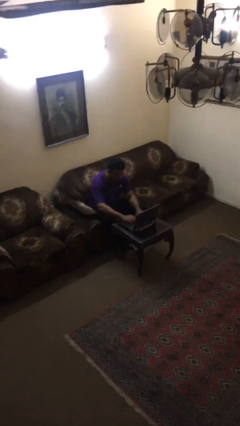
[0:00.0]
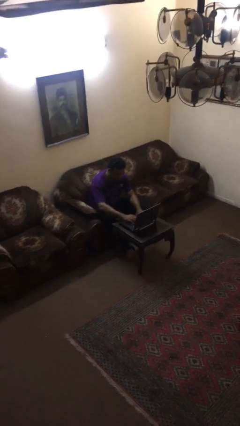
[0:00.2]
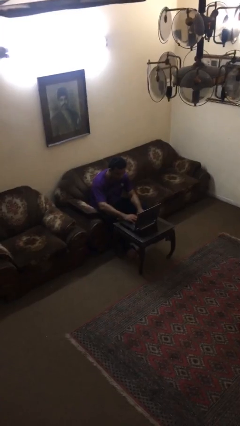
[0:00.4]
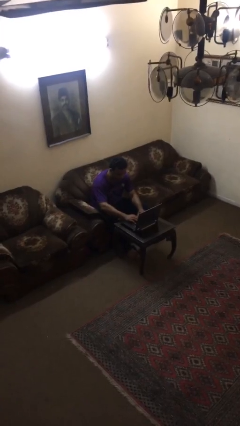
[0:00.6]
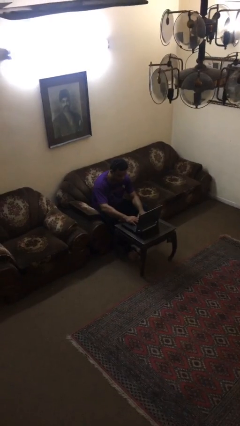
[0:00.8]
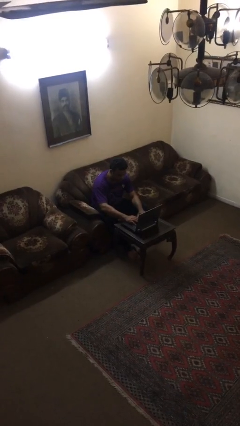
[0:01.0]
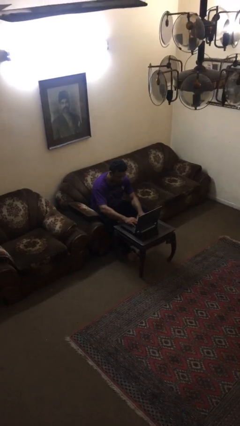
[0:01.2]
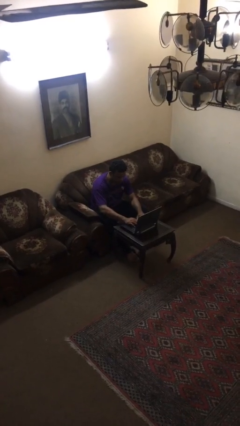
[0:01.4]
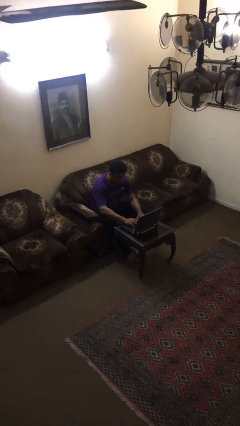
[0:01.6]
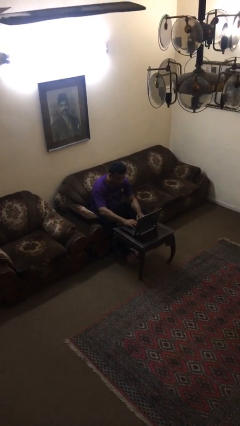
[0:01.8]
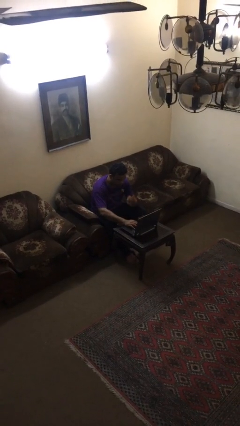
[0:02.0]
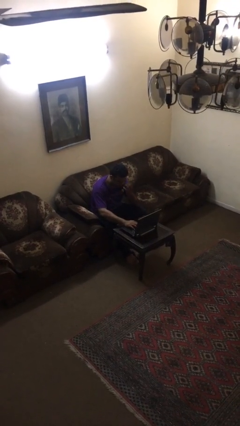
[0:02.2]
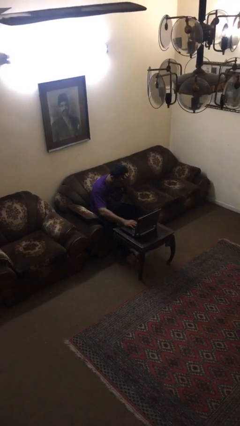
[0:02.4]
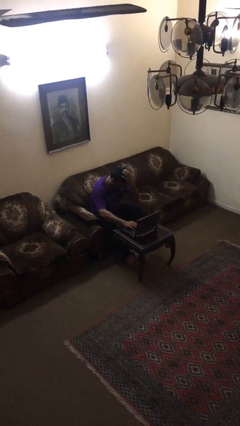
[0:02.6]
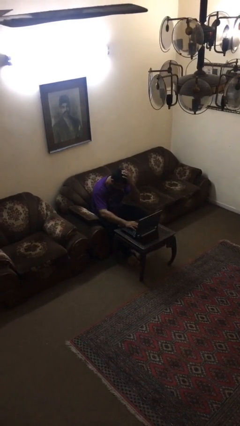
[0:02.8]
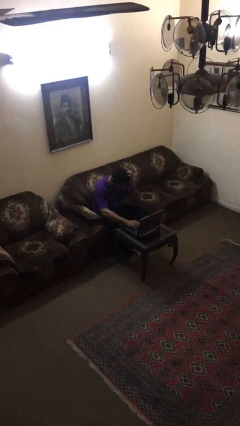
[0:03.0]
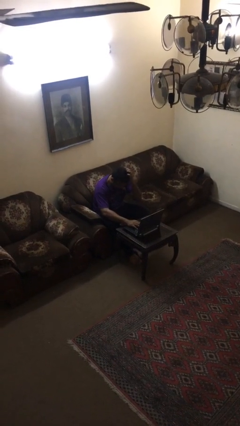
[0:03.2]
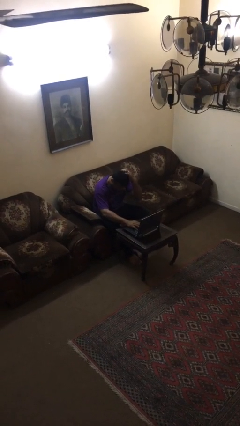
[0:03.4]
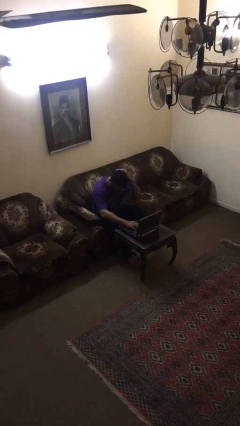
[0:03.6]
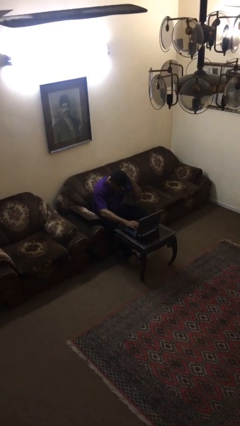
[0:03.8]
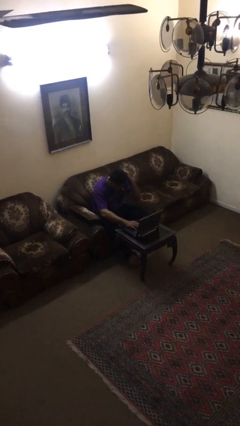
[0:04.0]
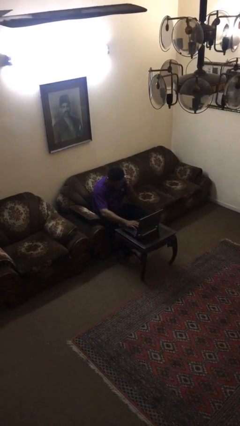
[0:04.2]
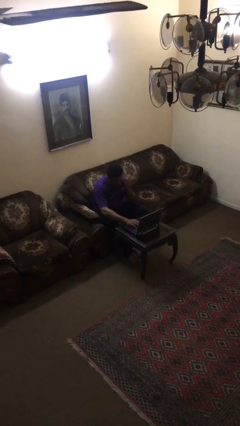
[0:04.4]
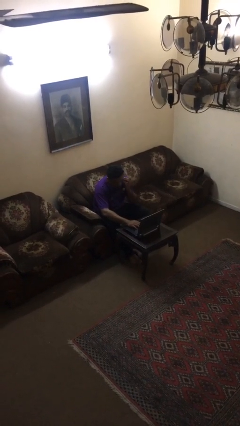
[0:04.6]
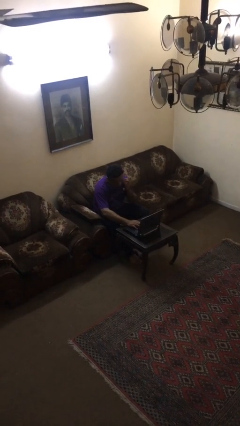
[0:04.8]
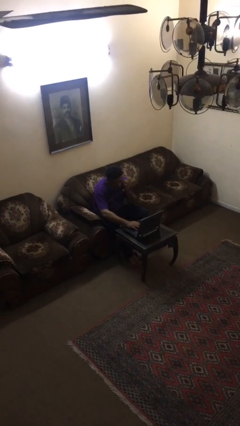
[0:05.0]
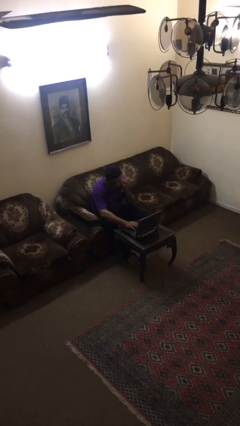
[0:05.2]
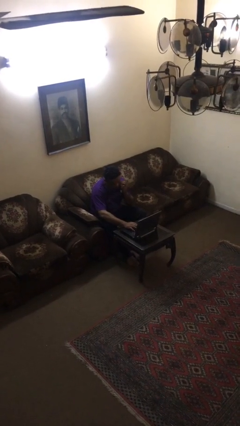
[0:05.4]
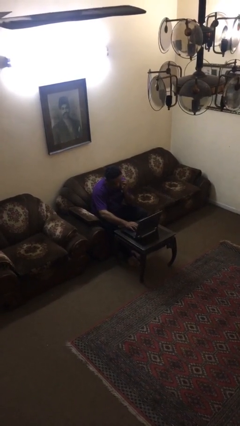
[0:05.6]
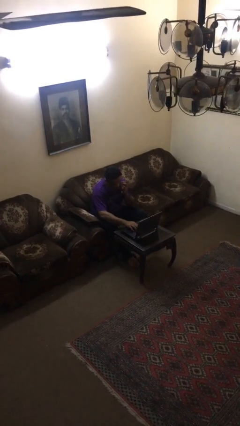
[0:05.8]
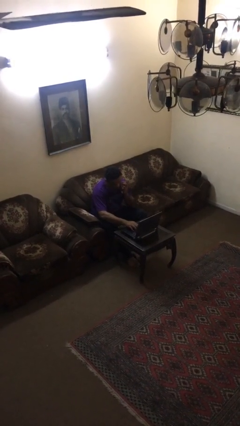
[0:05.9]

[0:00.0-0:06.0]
person interacts with laptop

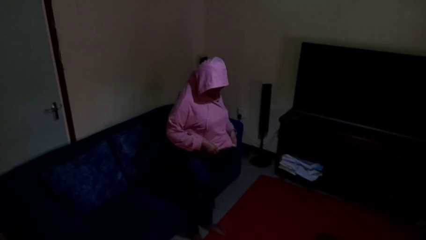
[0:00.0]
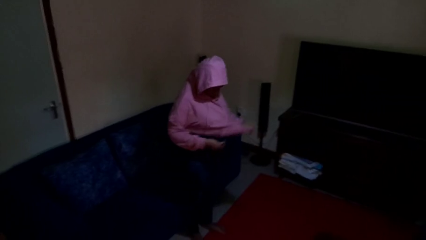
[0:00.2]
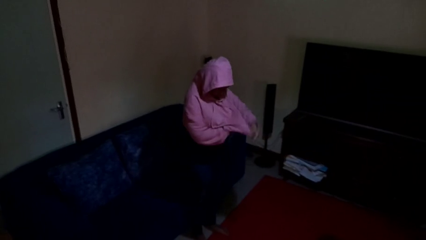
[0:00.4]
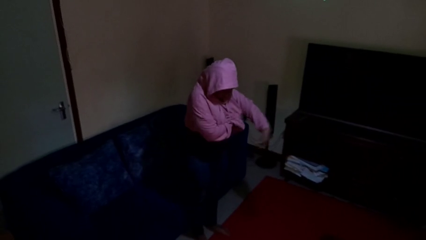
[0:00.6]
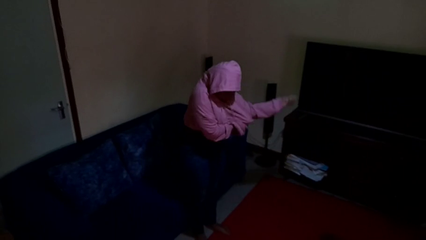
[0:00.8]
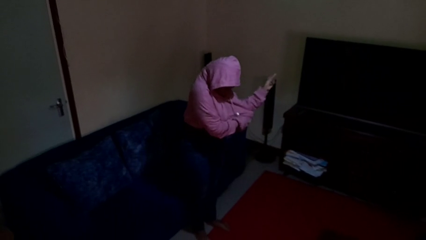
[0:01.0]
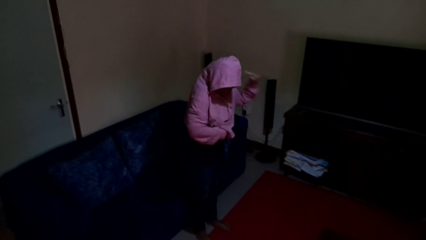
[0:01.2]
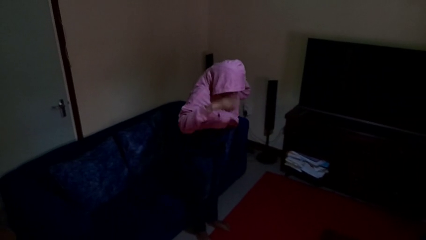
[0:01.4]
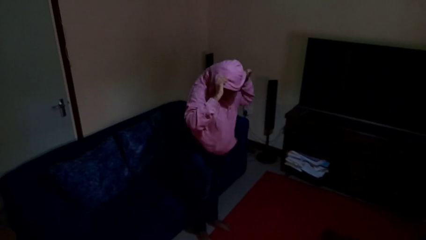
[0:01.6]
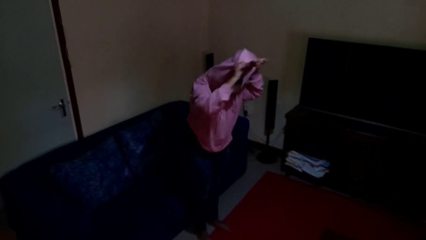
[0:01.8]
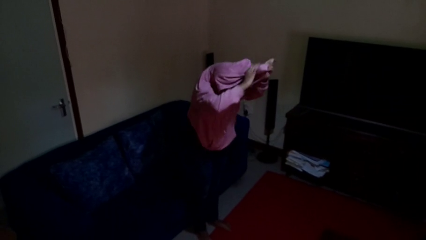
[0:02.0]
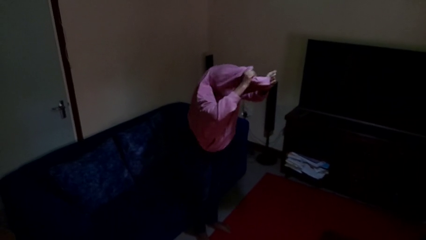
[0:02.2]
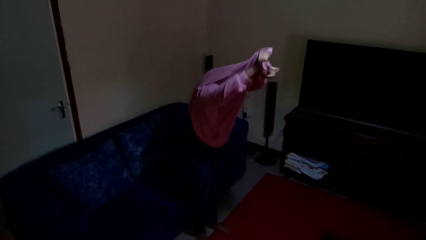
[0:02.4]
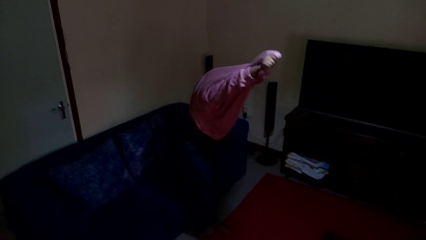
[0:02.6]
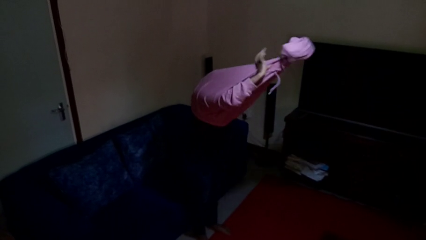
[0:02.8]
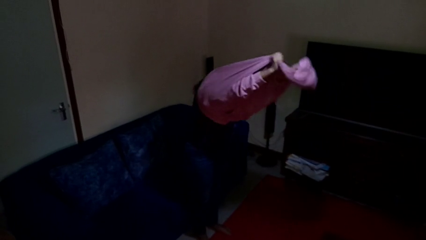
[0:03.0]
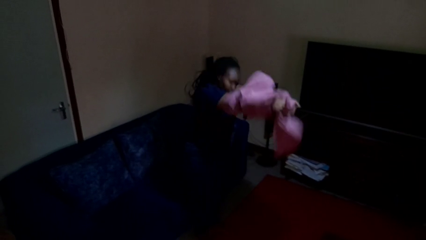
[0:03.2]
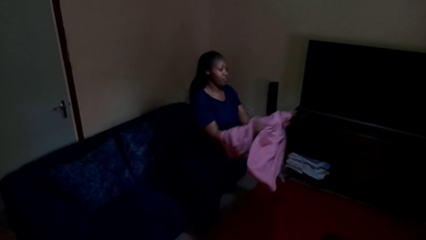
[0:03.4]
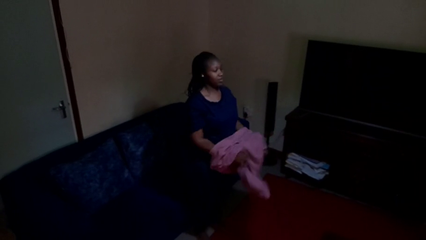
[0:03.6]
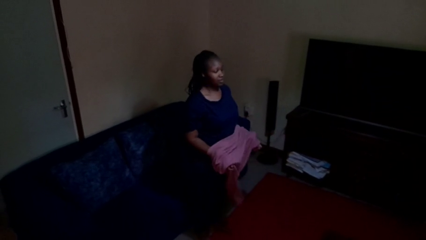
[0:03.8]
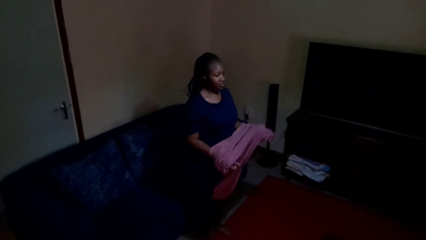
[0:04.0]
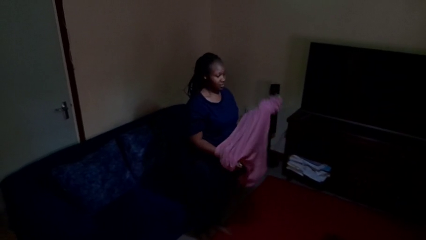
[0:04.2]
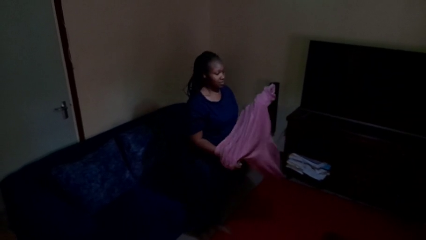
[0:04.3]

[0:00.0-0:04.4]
person takes off hoodie

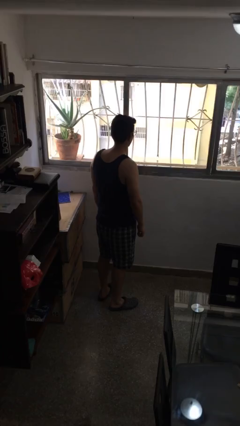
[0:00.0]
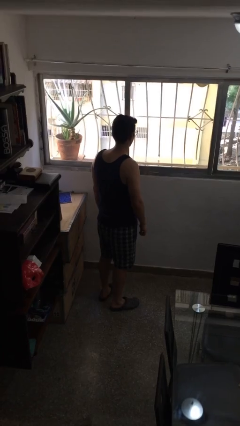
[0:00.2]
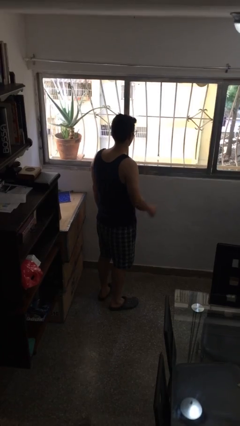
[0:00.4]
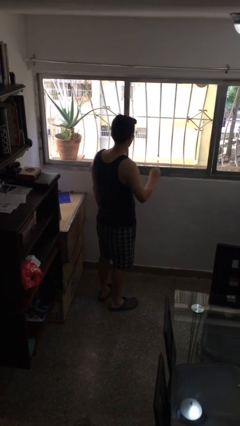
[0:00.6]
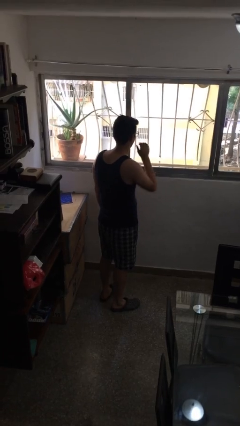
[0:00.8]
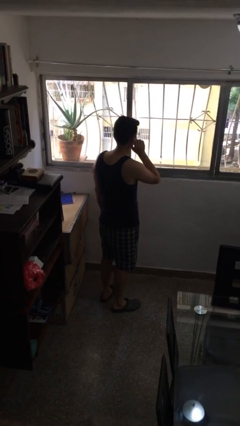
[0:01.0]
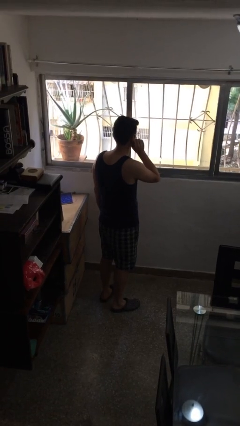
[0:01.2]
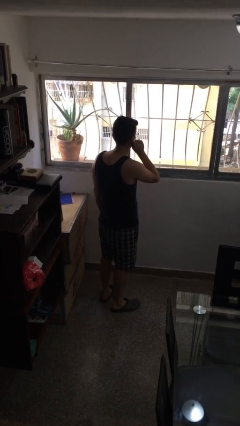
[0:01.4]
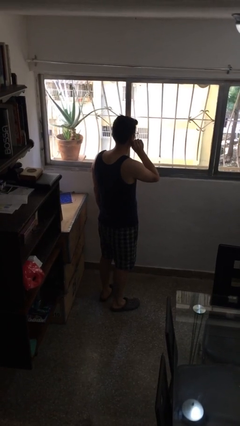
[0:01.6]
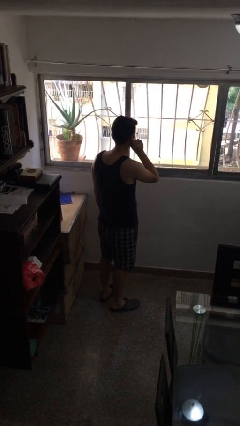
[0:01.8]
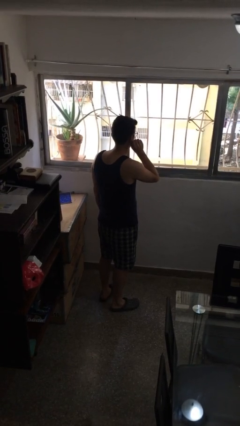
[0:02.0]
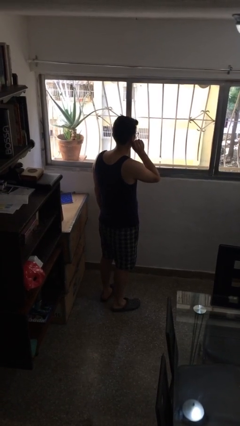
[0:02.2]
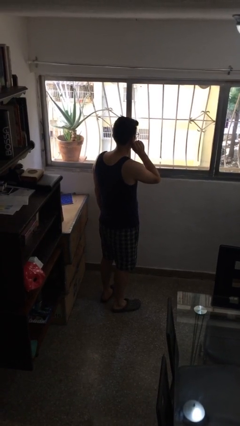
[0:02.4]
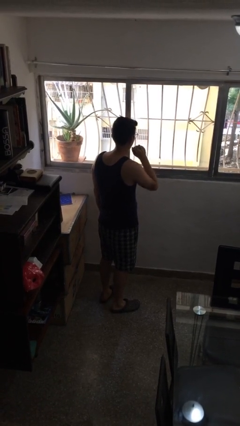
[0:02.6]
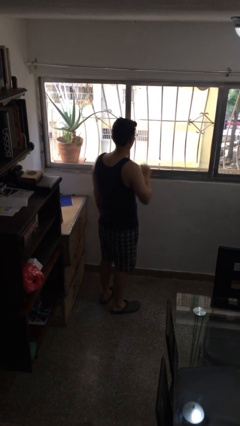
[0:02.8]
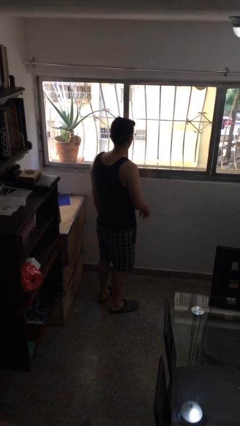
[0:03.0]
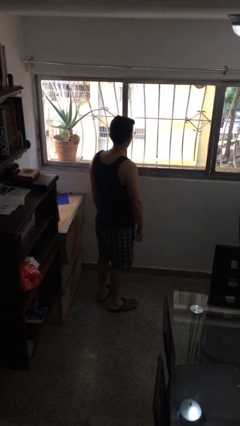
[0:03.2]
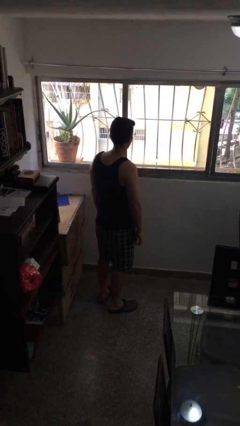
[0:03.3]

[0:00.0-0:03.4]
person touches earlobe

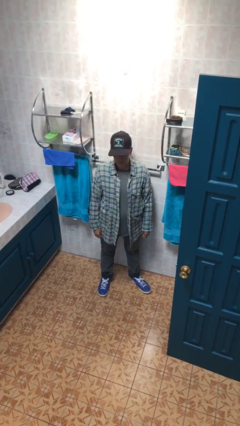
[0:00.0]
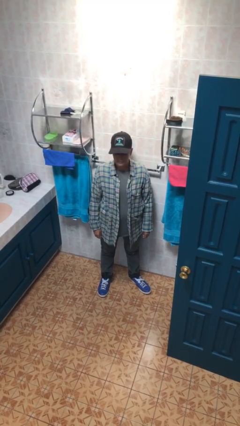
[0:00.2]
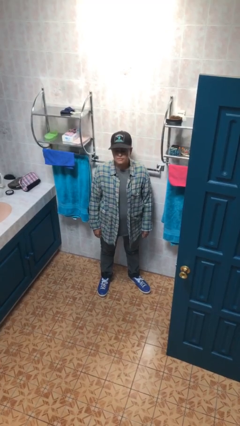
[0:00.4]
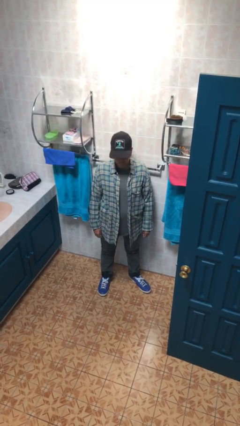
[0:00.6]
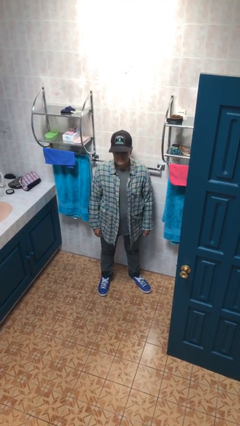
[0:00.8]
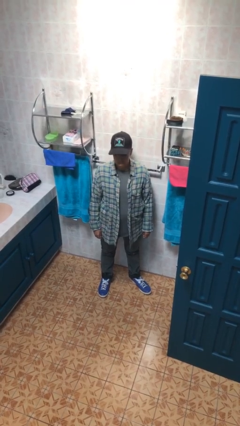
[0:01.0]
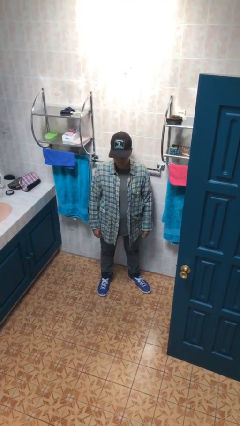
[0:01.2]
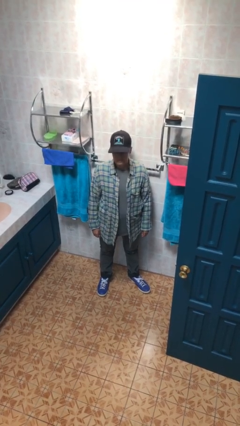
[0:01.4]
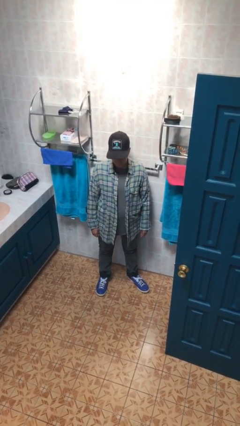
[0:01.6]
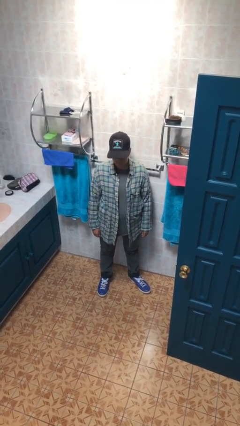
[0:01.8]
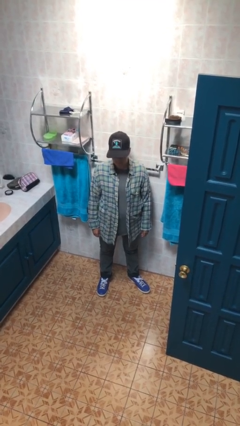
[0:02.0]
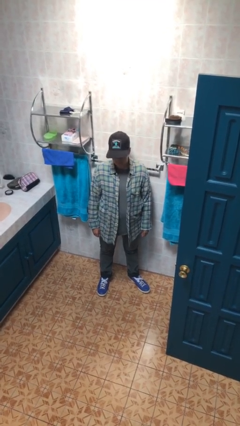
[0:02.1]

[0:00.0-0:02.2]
person nods head

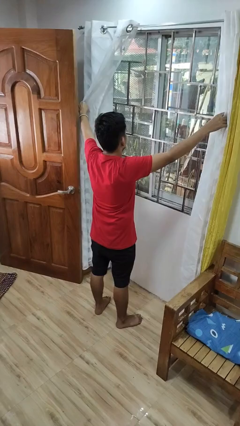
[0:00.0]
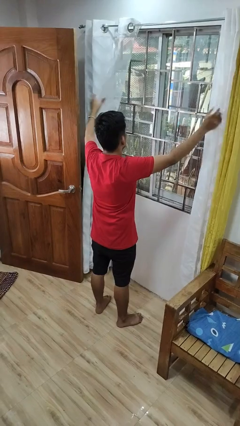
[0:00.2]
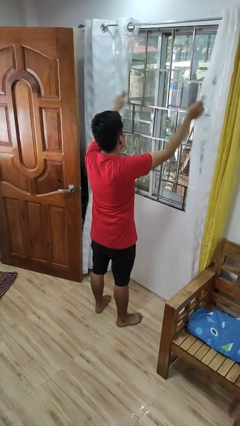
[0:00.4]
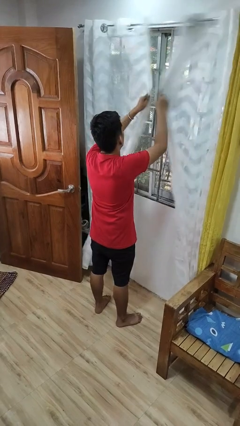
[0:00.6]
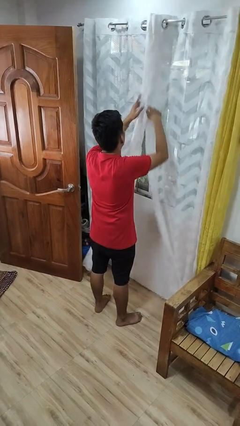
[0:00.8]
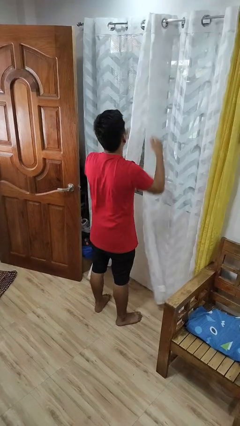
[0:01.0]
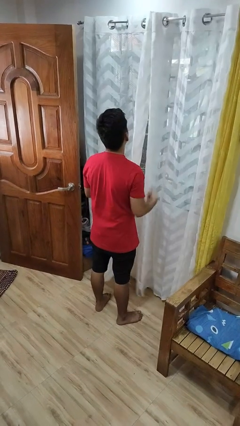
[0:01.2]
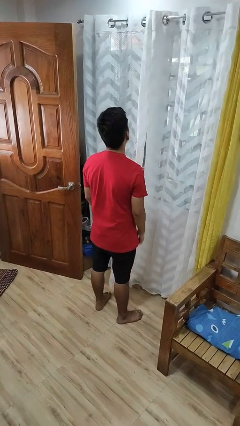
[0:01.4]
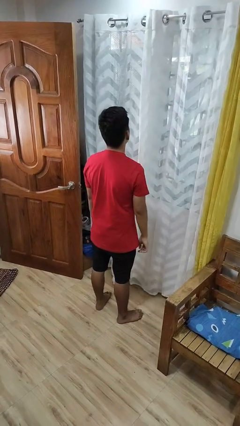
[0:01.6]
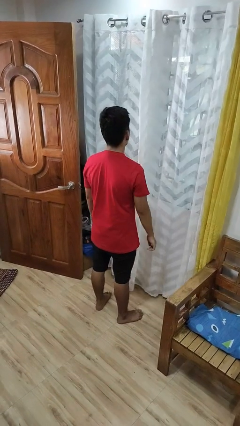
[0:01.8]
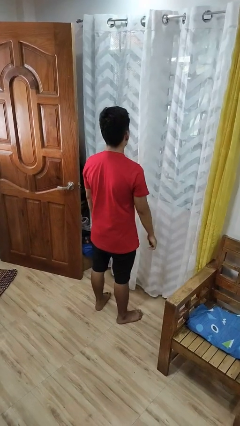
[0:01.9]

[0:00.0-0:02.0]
person closes curtains
